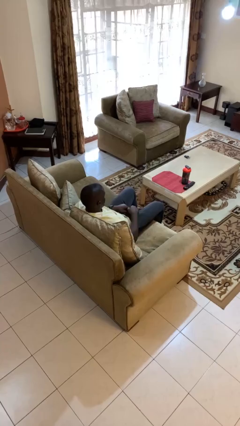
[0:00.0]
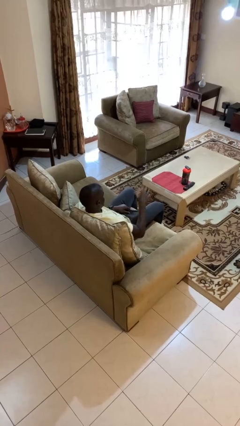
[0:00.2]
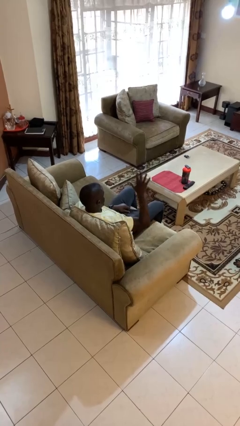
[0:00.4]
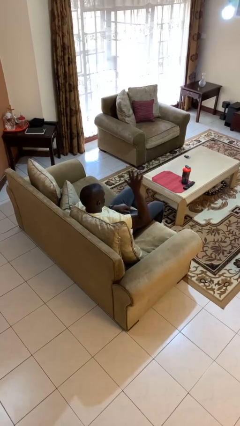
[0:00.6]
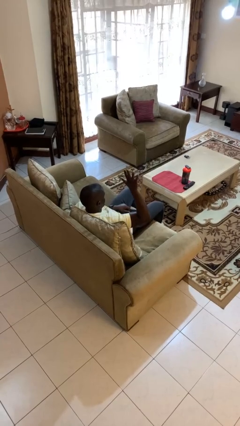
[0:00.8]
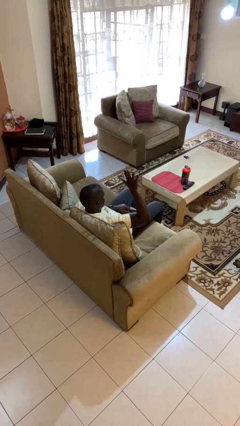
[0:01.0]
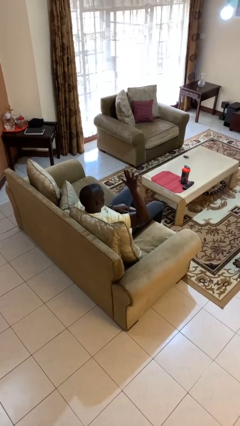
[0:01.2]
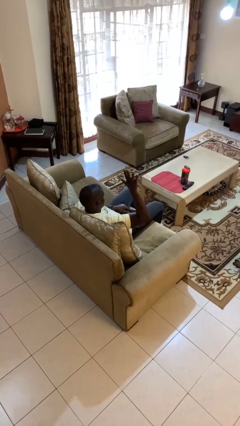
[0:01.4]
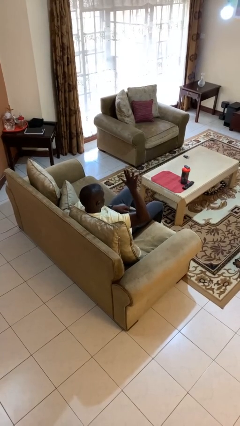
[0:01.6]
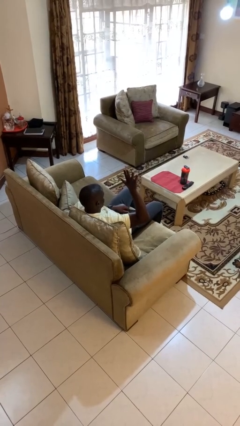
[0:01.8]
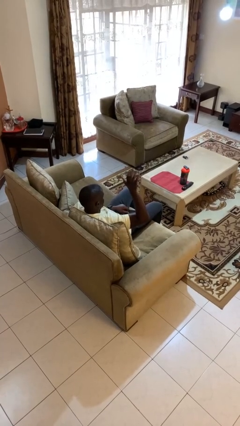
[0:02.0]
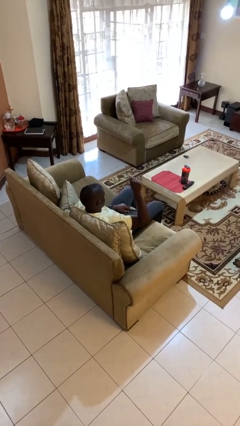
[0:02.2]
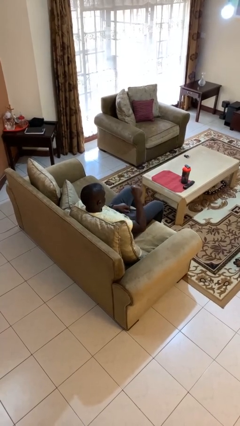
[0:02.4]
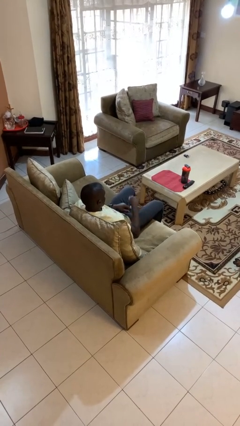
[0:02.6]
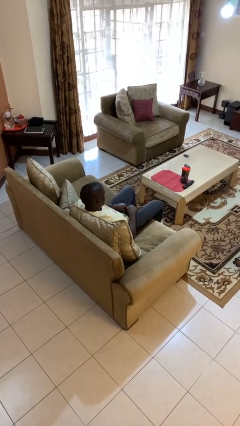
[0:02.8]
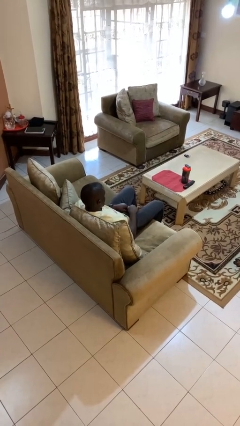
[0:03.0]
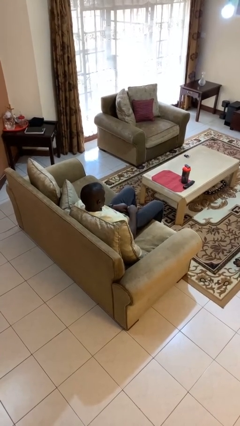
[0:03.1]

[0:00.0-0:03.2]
person gestures number five

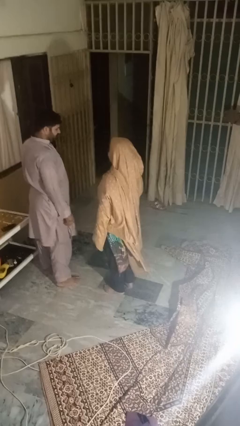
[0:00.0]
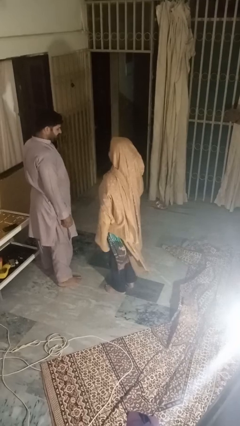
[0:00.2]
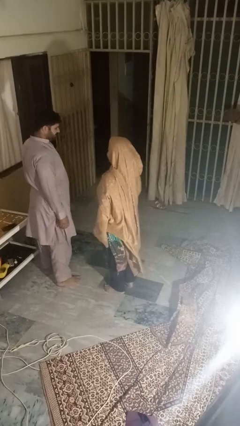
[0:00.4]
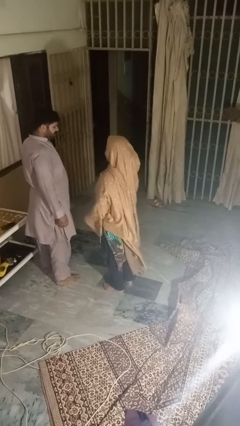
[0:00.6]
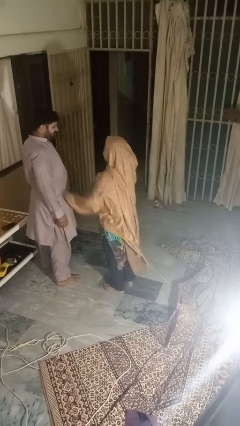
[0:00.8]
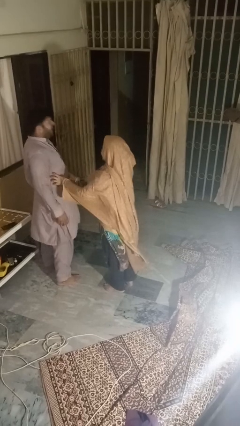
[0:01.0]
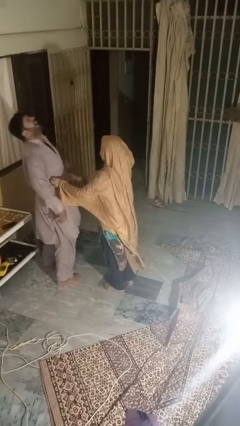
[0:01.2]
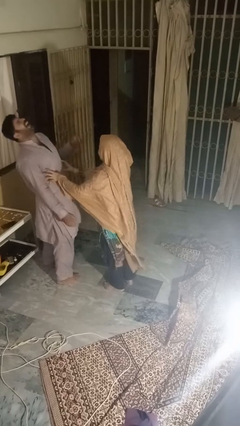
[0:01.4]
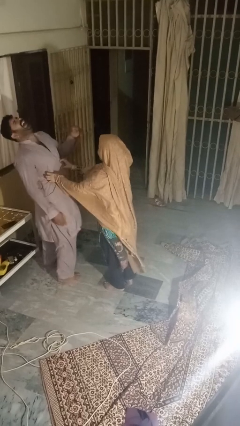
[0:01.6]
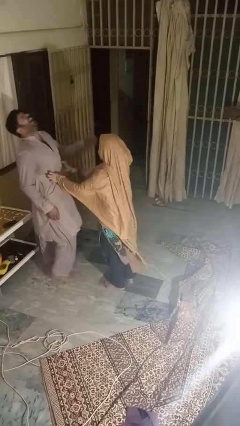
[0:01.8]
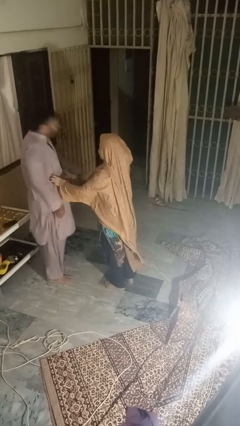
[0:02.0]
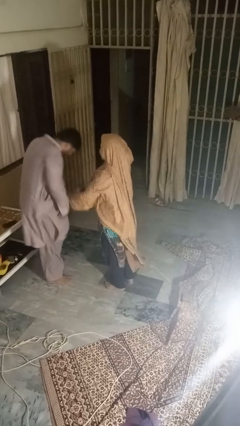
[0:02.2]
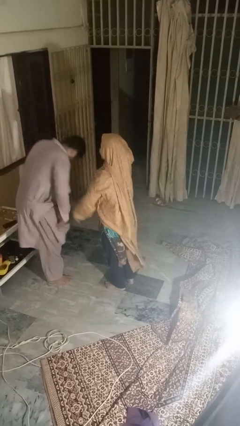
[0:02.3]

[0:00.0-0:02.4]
person tickles person

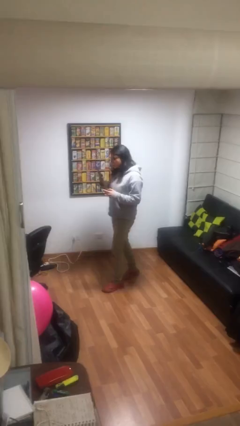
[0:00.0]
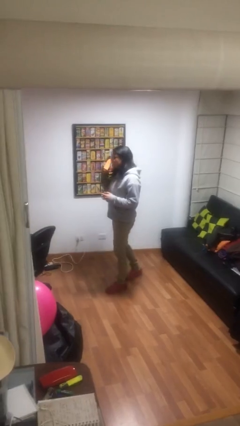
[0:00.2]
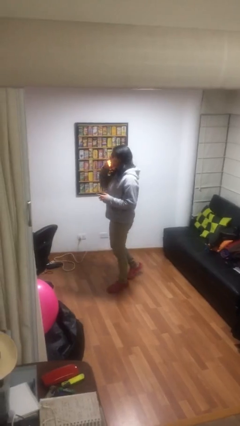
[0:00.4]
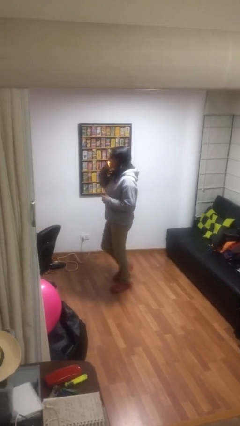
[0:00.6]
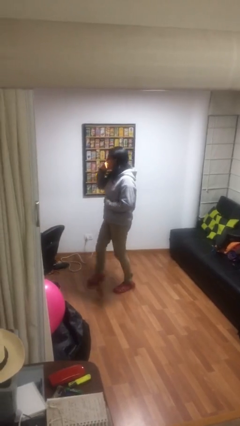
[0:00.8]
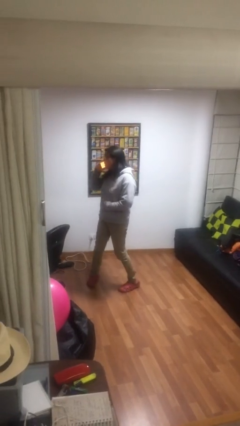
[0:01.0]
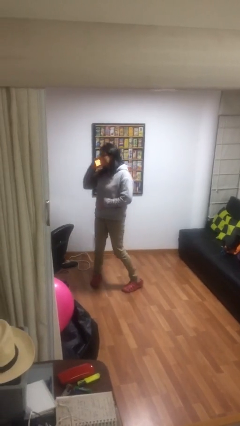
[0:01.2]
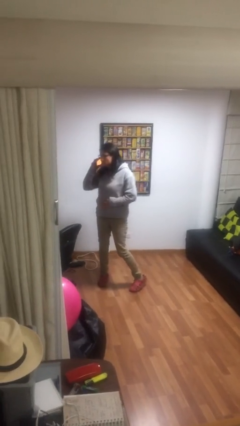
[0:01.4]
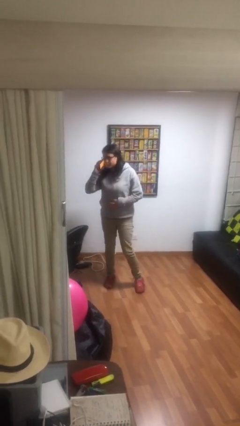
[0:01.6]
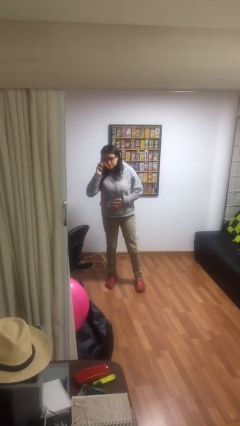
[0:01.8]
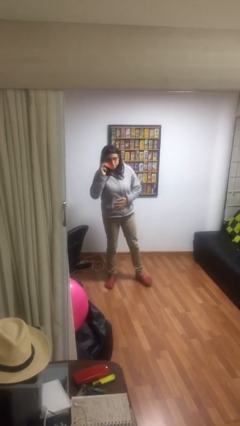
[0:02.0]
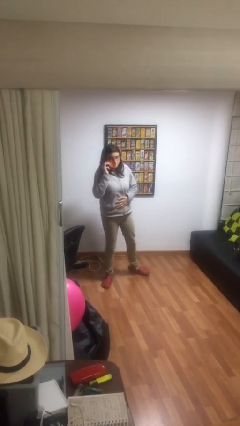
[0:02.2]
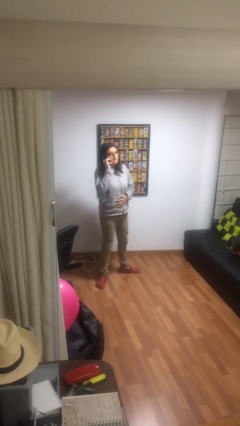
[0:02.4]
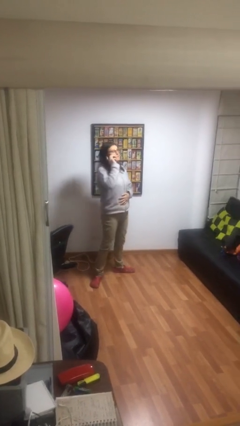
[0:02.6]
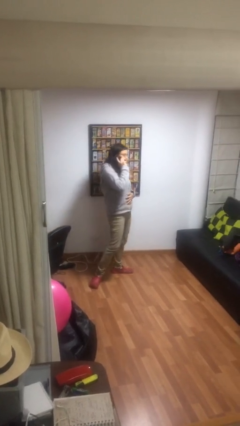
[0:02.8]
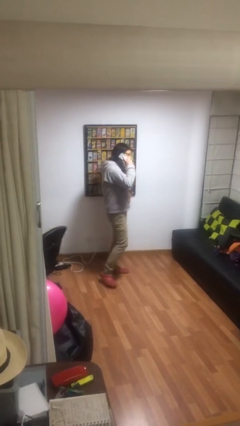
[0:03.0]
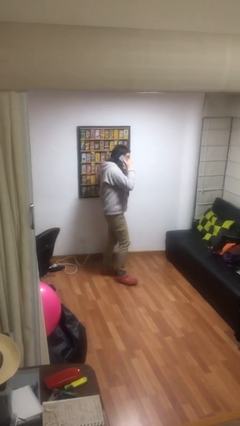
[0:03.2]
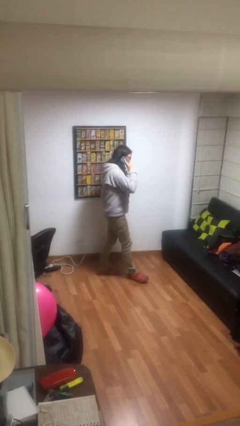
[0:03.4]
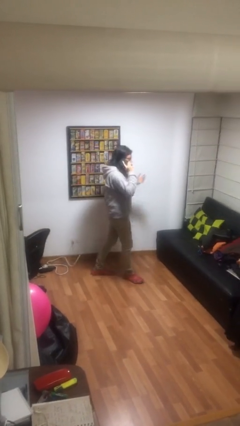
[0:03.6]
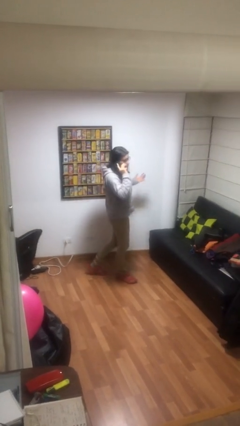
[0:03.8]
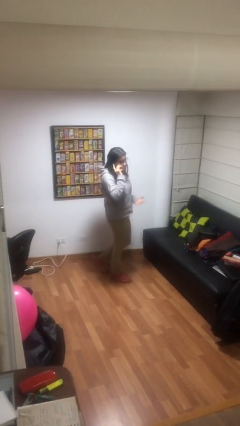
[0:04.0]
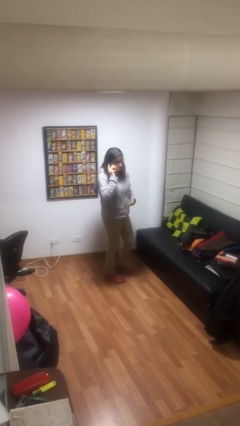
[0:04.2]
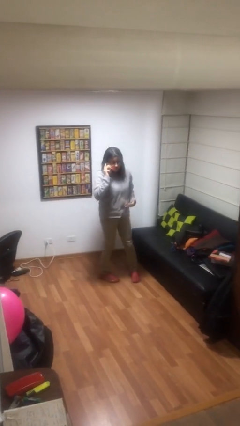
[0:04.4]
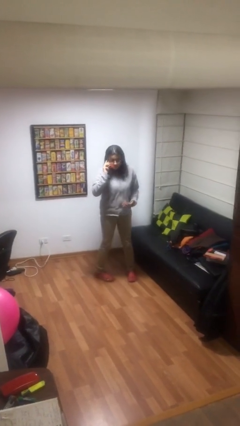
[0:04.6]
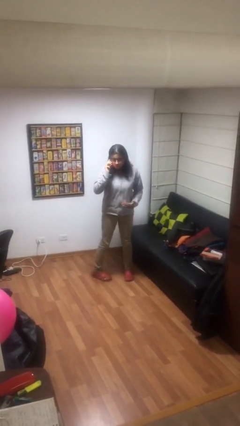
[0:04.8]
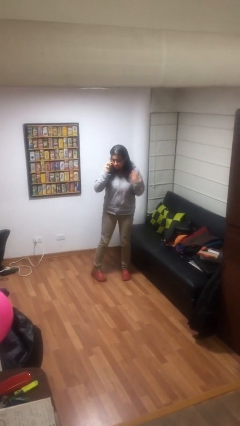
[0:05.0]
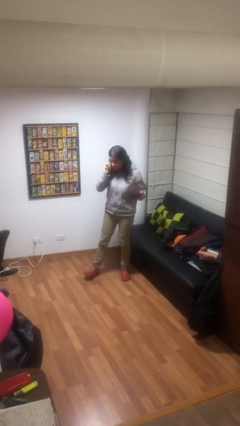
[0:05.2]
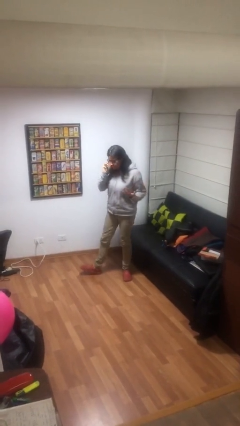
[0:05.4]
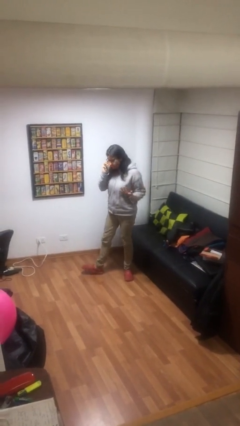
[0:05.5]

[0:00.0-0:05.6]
person talks on phone

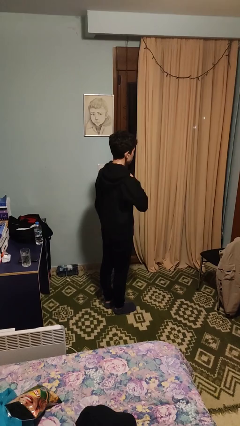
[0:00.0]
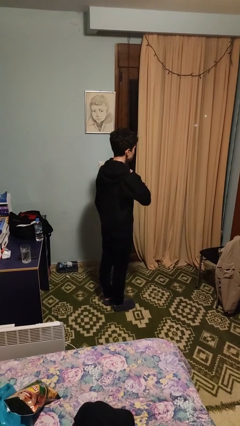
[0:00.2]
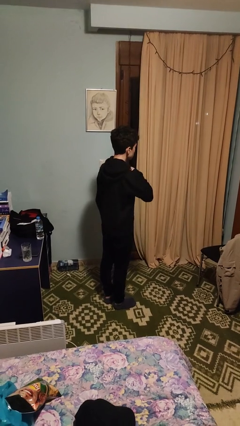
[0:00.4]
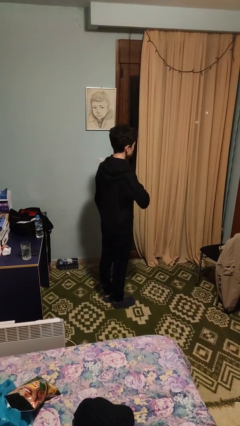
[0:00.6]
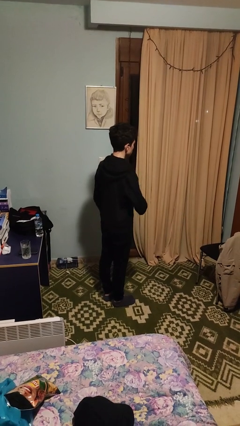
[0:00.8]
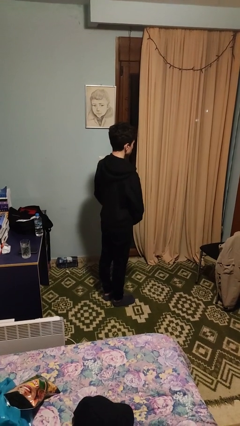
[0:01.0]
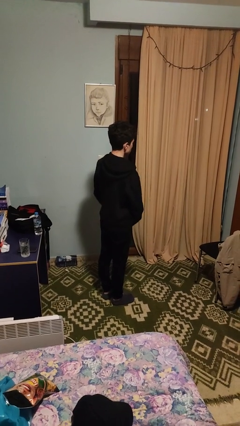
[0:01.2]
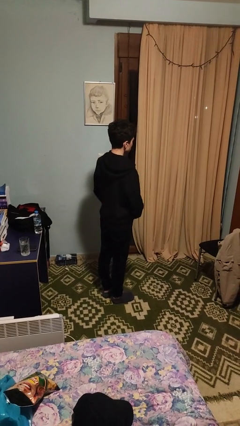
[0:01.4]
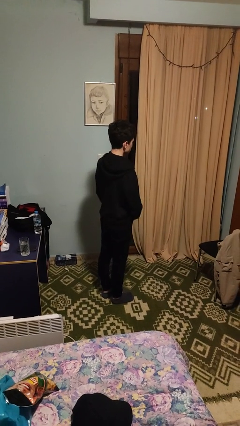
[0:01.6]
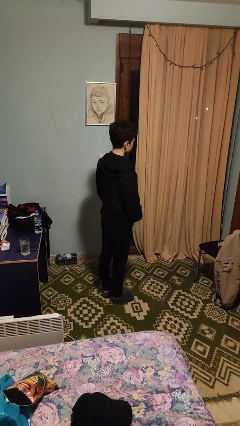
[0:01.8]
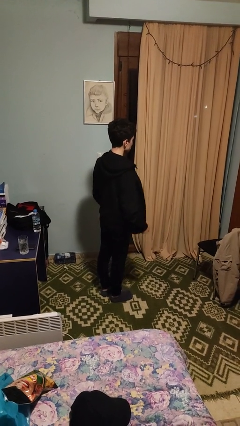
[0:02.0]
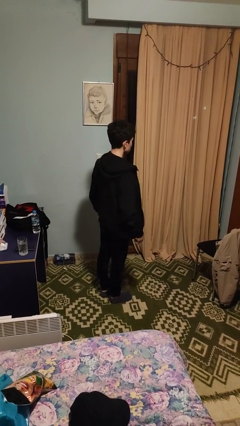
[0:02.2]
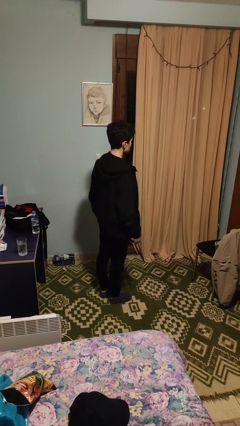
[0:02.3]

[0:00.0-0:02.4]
person unzips jacket

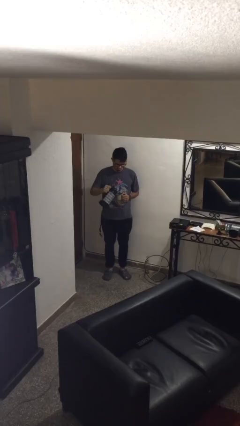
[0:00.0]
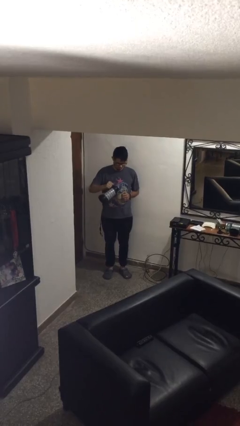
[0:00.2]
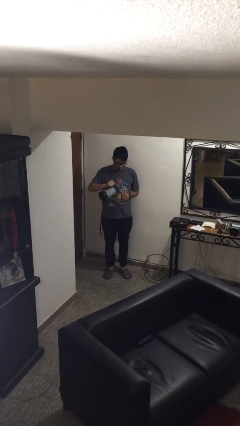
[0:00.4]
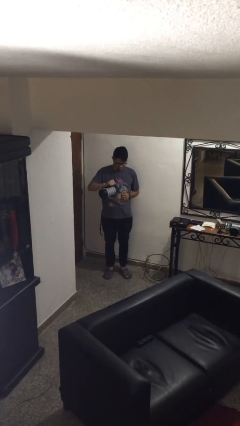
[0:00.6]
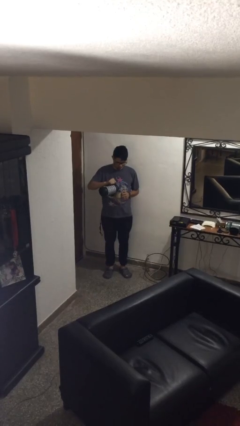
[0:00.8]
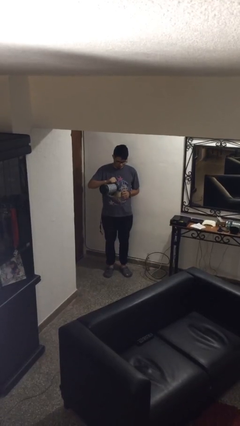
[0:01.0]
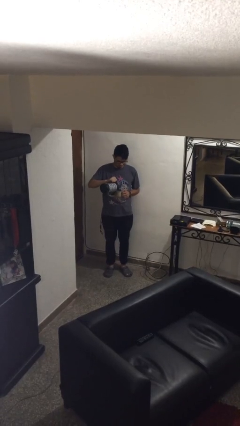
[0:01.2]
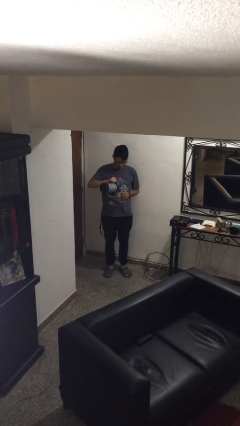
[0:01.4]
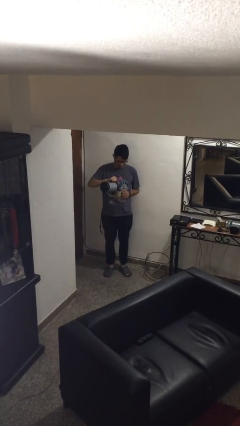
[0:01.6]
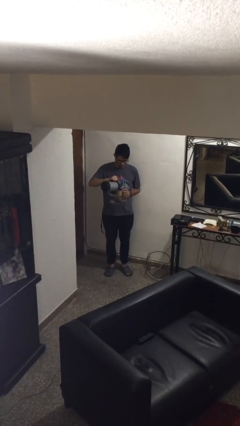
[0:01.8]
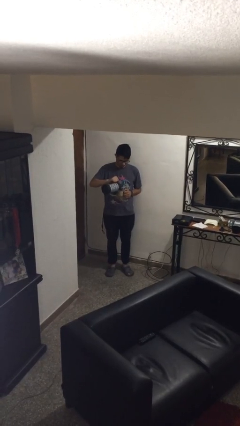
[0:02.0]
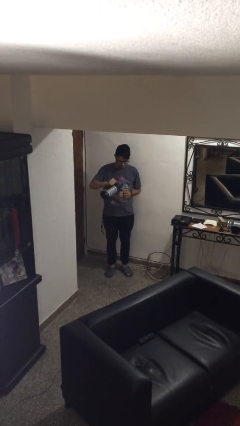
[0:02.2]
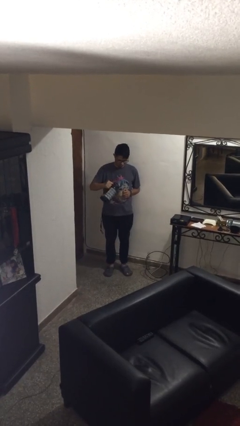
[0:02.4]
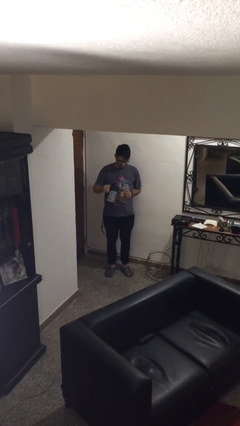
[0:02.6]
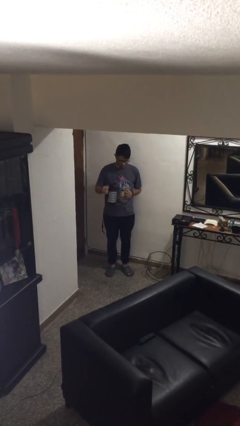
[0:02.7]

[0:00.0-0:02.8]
person pours coffee into mug

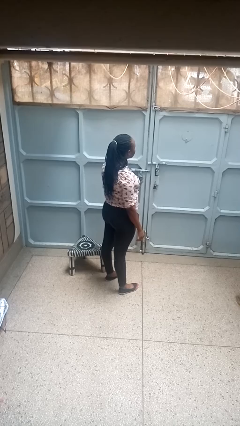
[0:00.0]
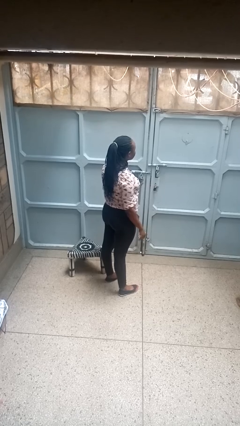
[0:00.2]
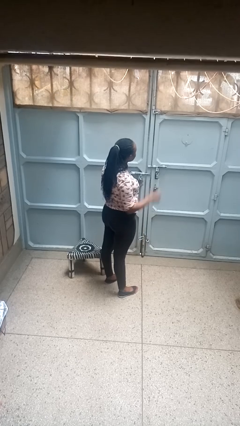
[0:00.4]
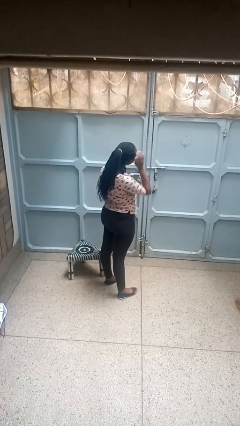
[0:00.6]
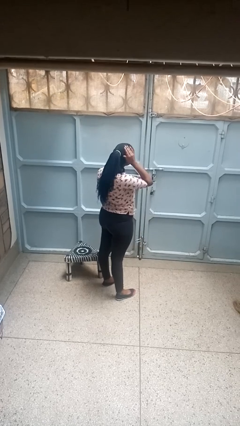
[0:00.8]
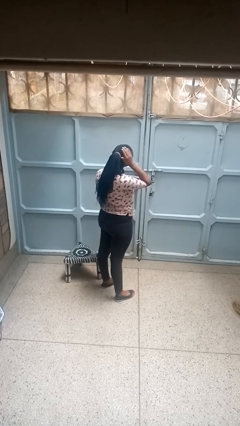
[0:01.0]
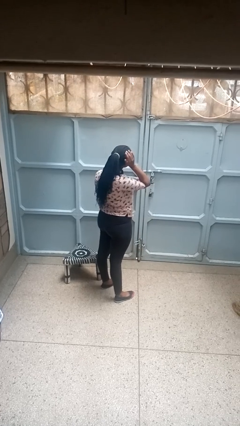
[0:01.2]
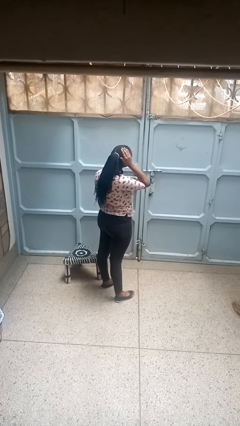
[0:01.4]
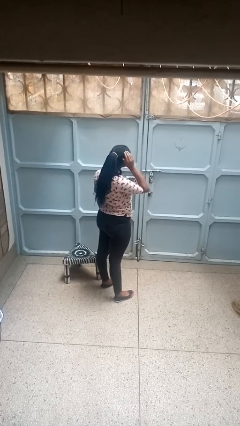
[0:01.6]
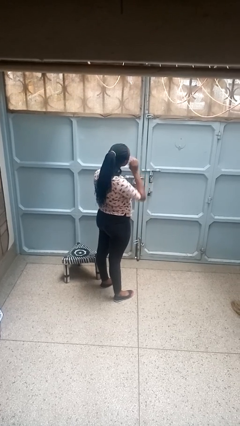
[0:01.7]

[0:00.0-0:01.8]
person pats head
